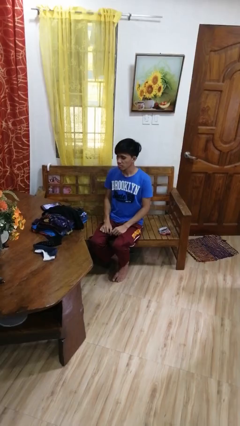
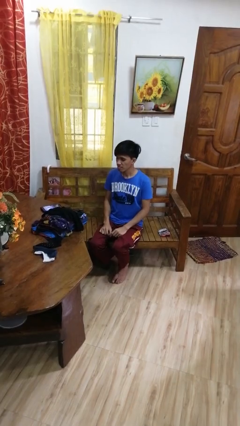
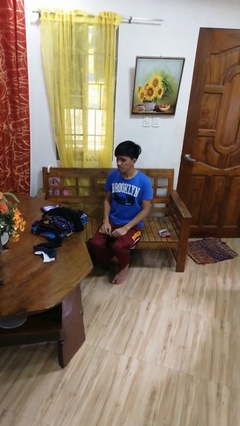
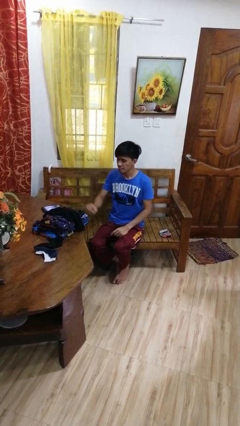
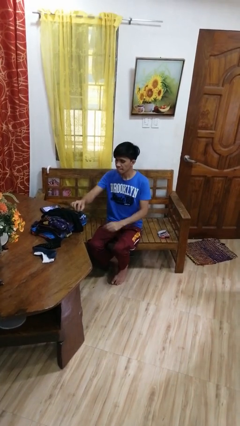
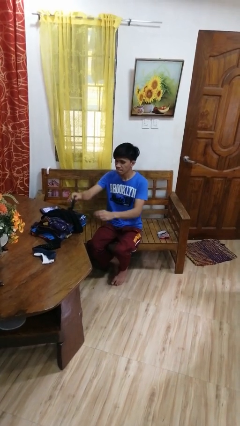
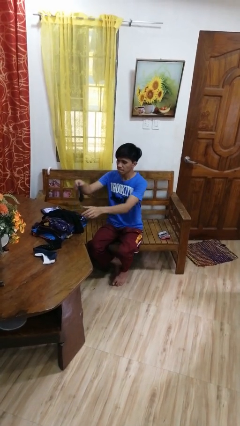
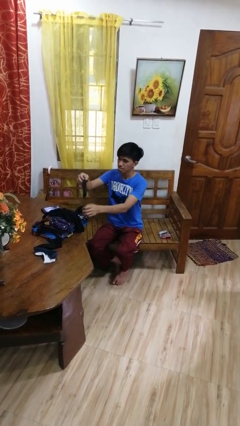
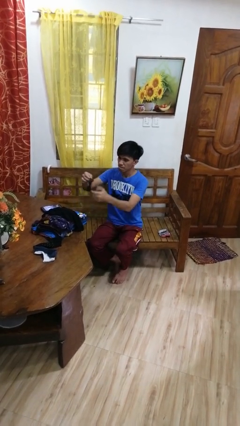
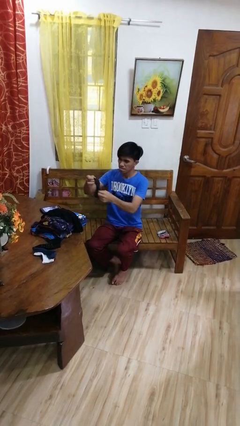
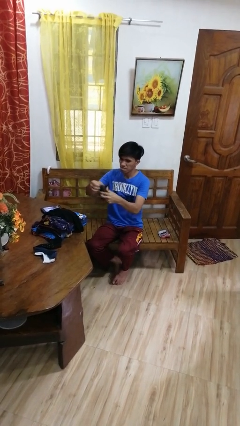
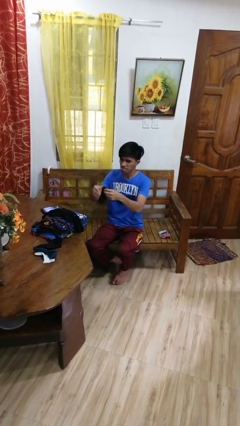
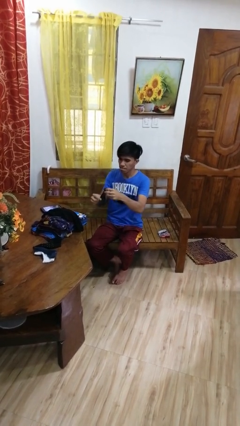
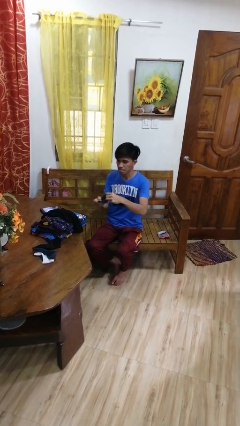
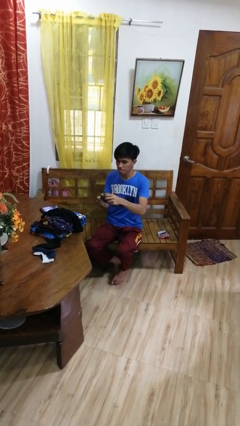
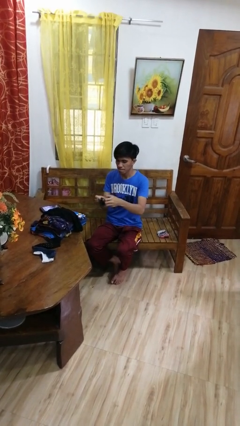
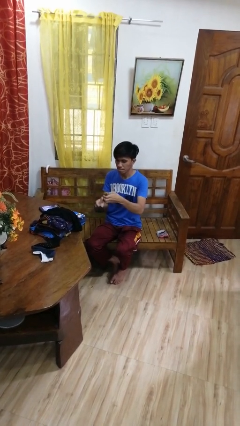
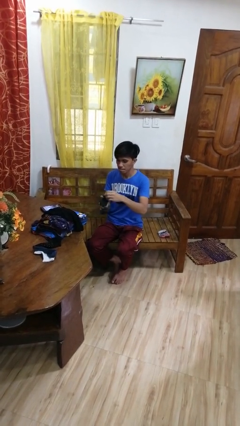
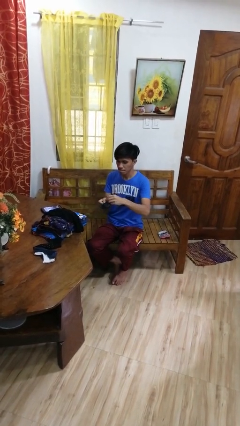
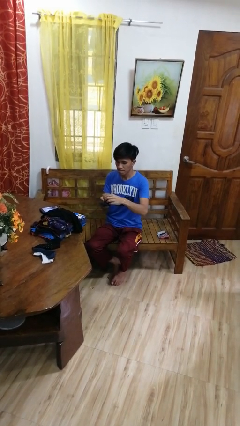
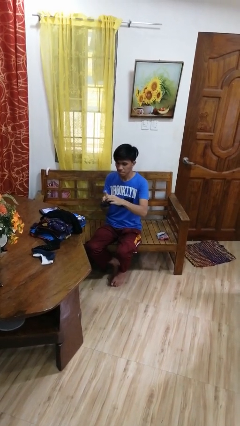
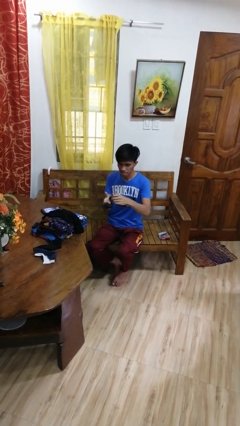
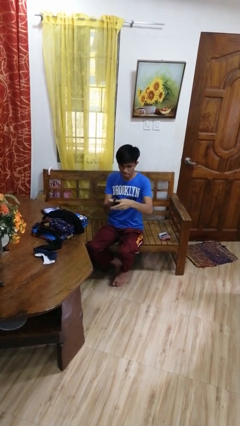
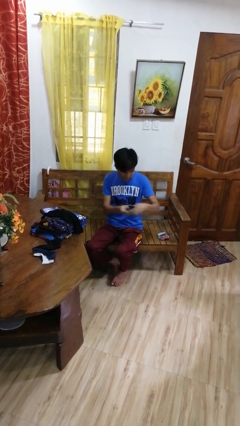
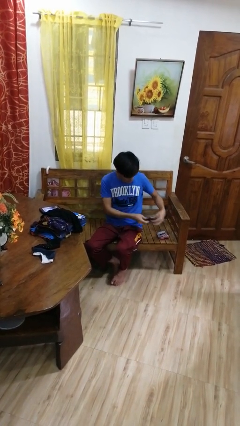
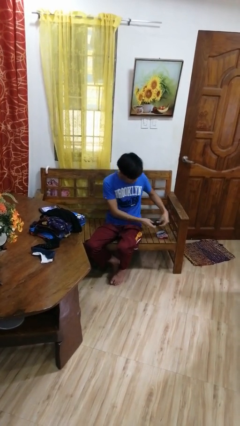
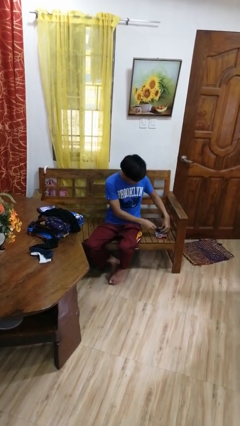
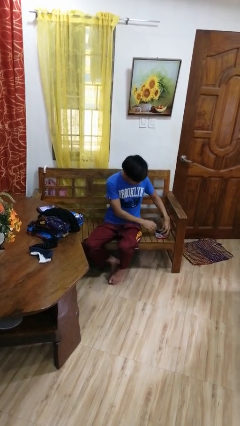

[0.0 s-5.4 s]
person folds socks

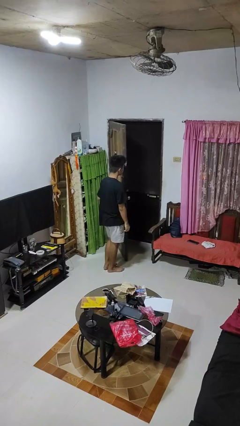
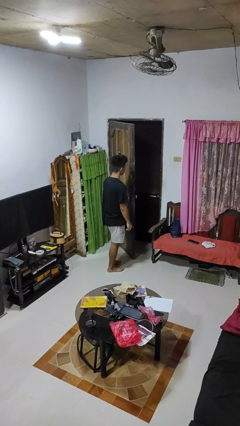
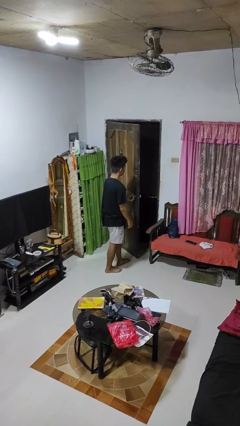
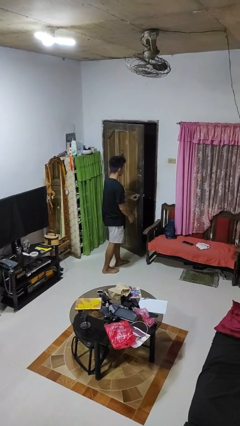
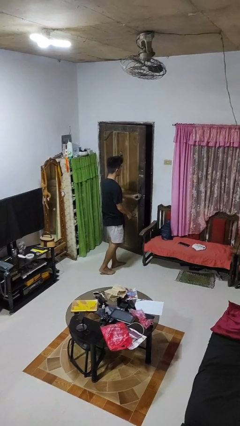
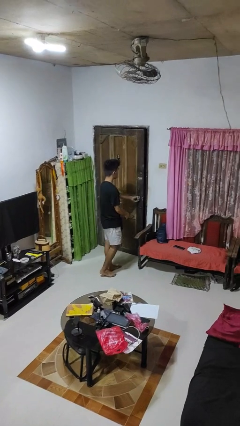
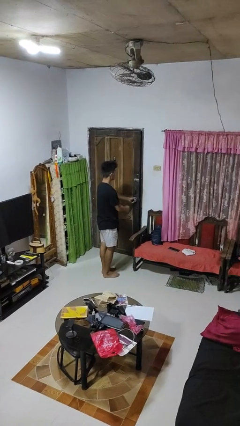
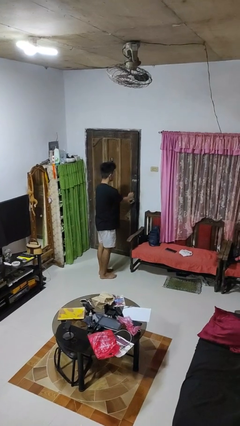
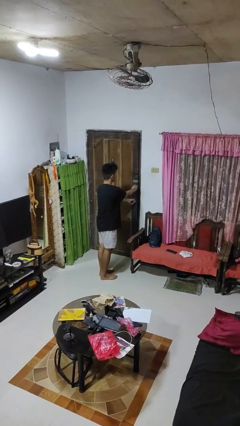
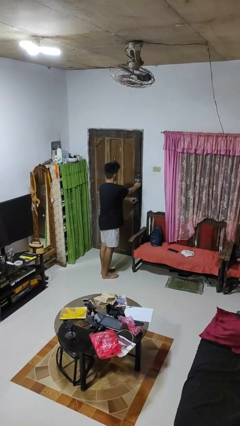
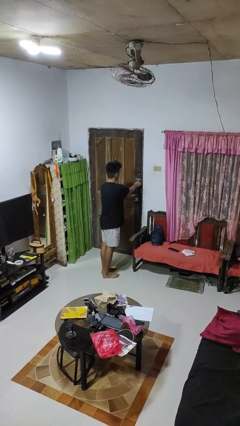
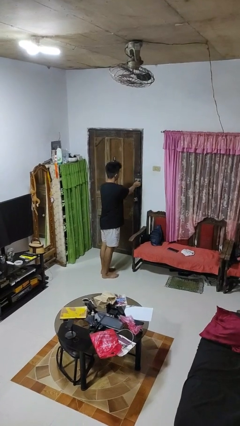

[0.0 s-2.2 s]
person closes facility door

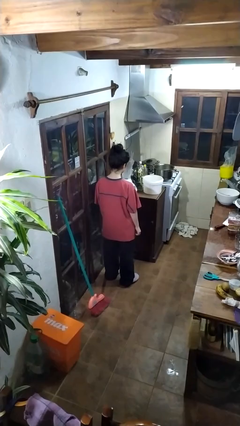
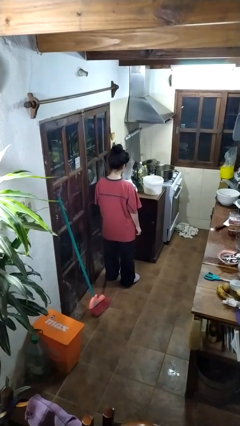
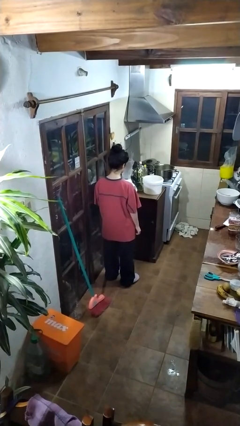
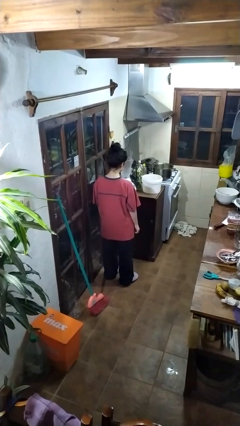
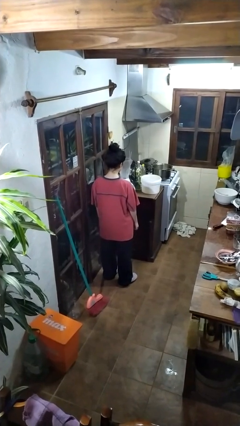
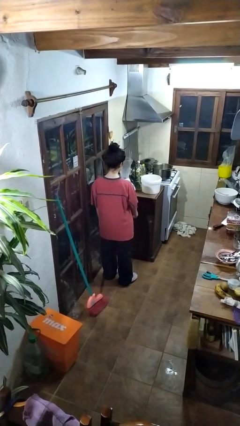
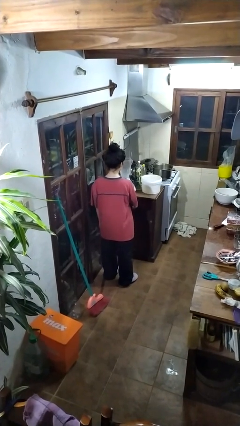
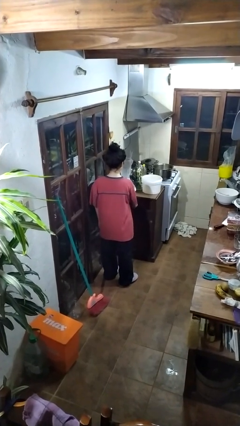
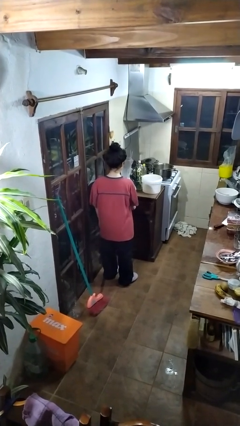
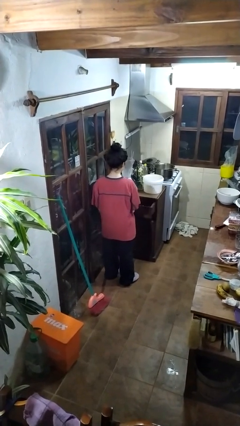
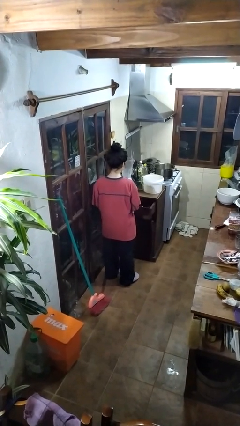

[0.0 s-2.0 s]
person opens kitchen drawer

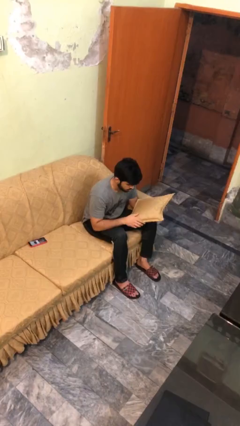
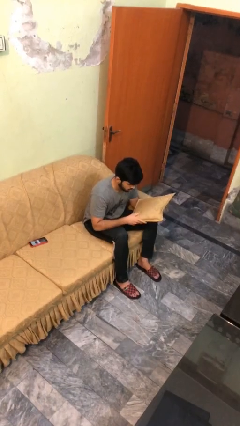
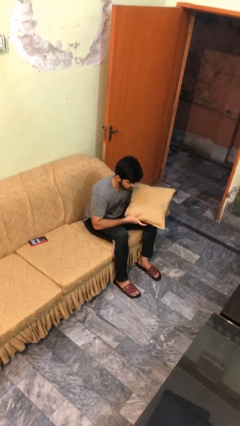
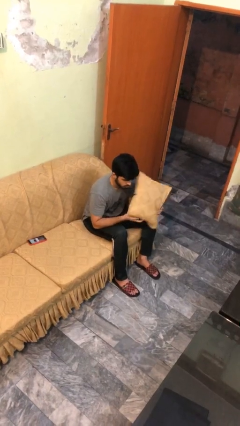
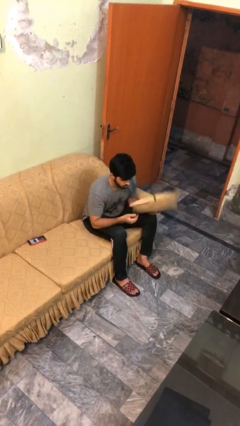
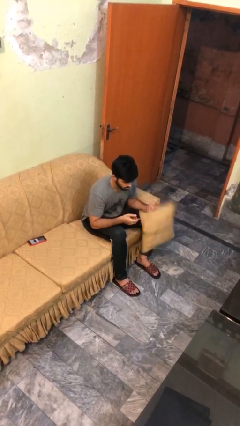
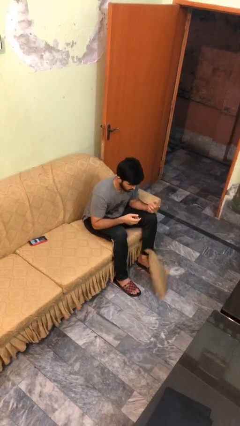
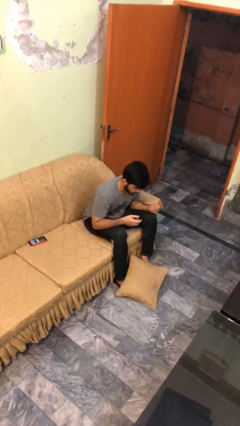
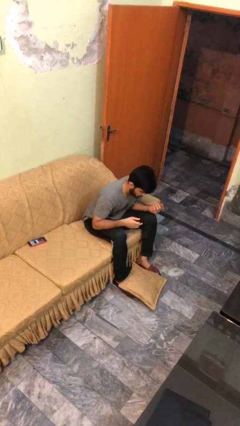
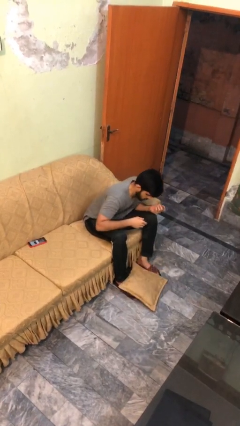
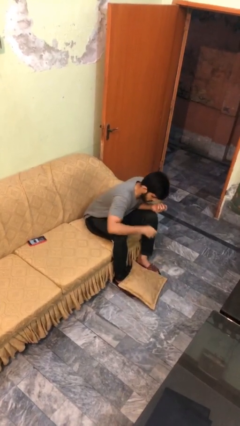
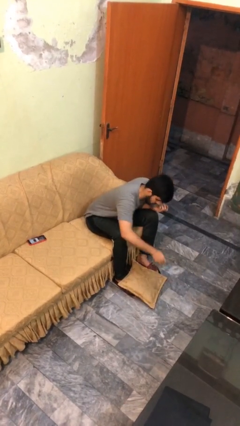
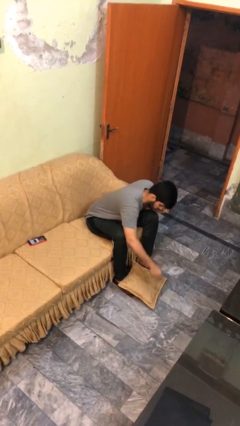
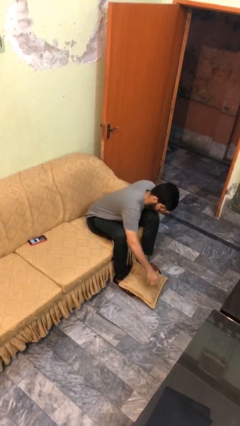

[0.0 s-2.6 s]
person drops object

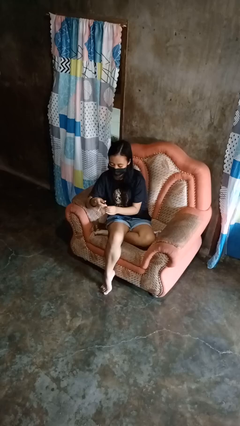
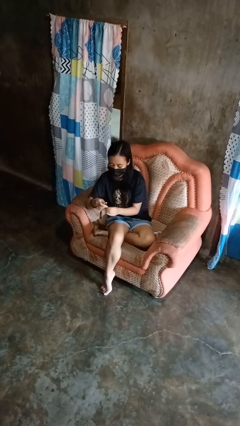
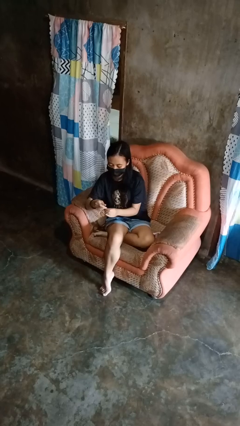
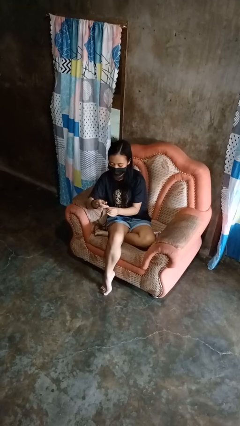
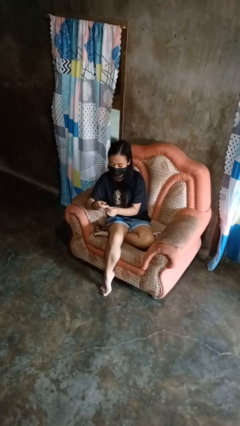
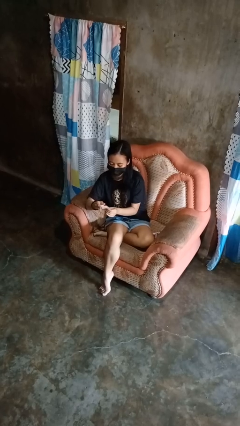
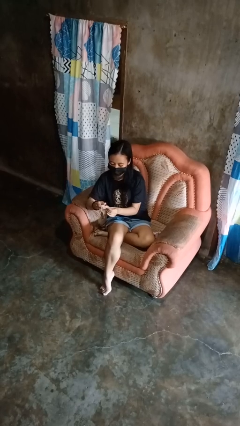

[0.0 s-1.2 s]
person clips fingernails

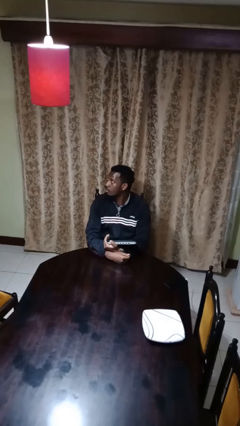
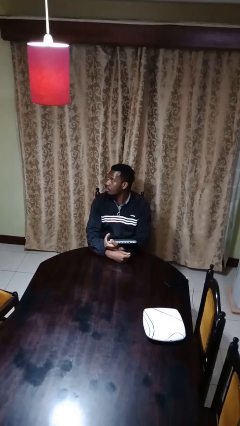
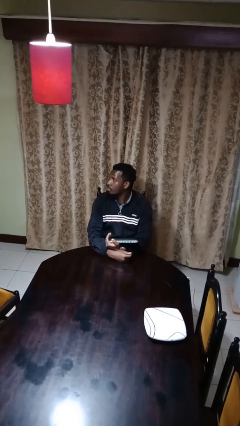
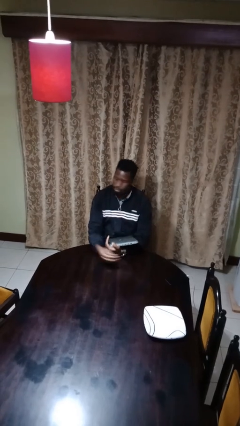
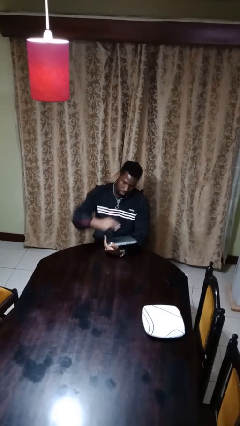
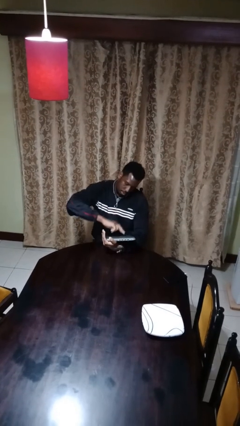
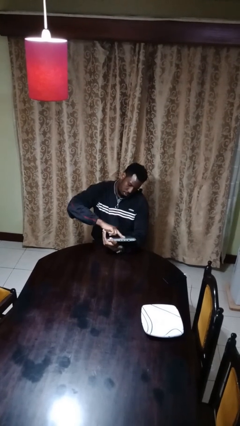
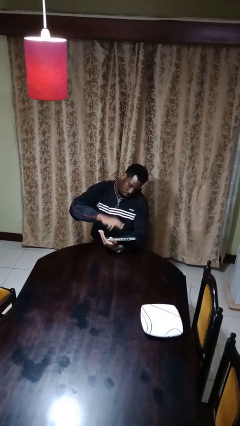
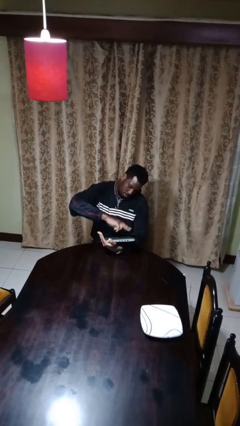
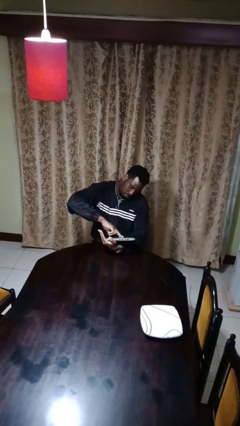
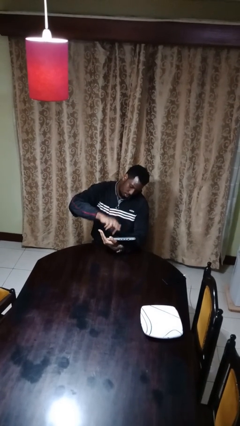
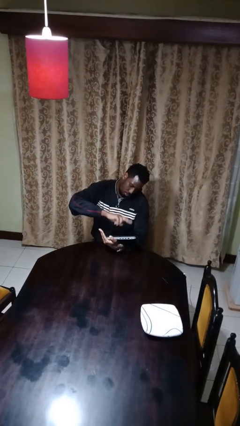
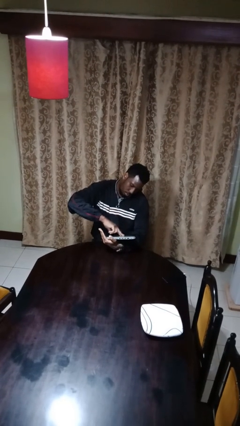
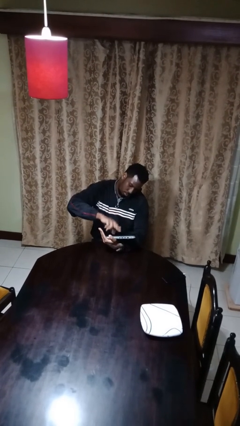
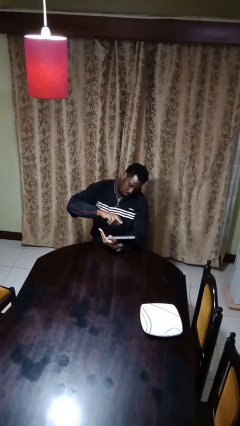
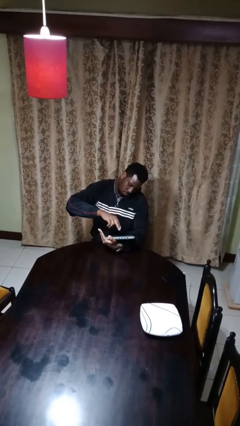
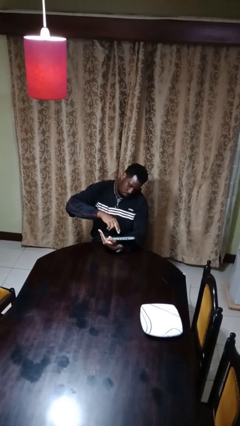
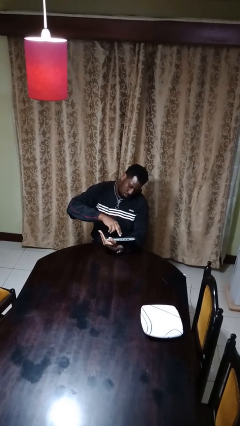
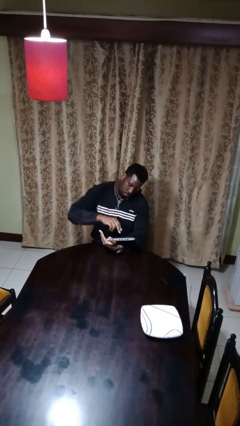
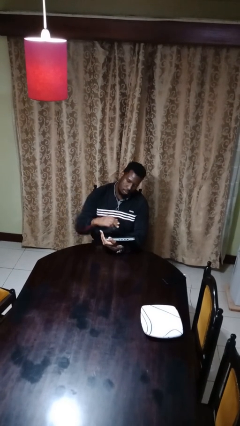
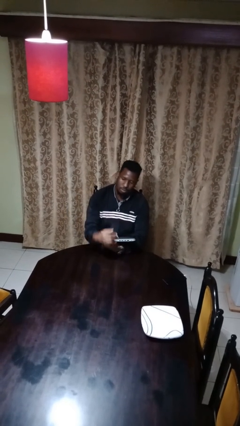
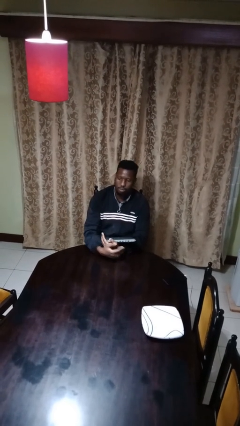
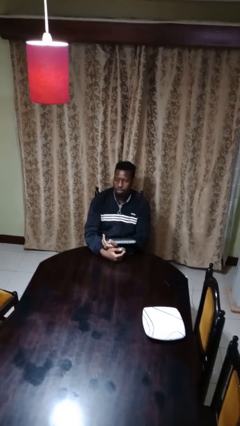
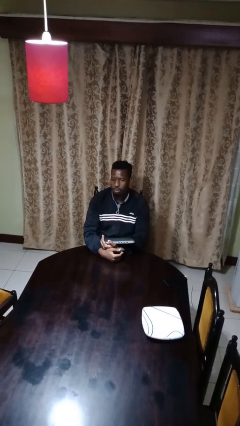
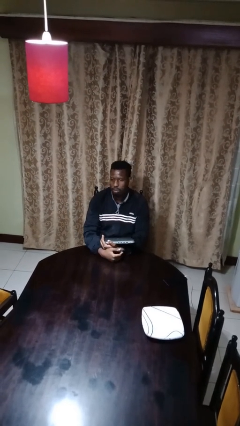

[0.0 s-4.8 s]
person interacts with tablet
